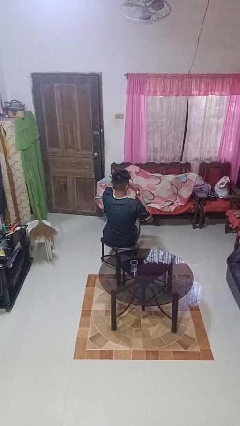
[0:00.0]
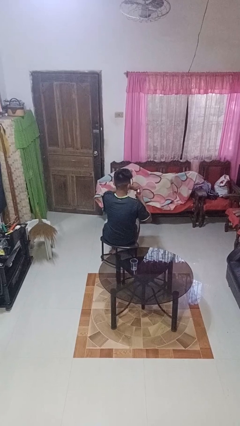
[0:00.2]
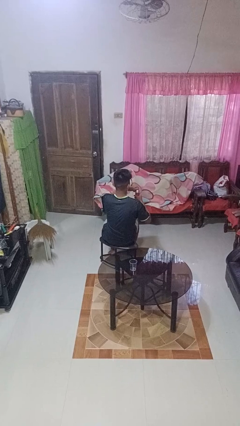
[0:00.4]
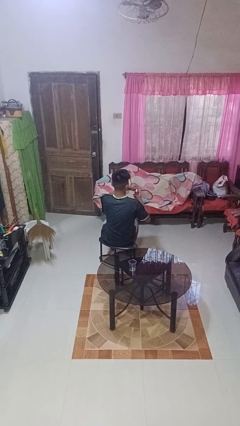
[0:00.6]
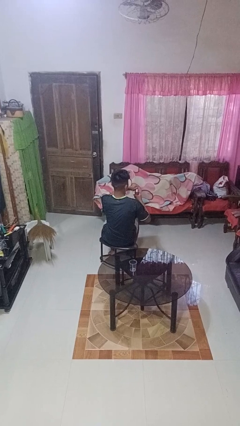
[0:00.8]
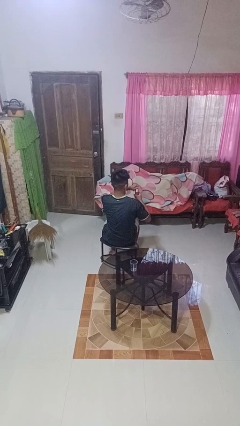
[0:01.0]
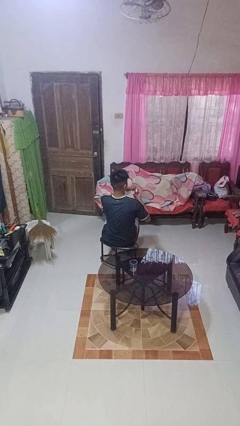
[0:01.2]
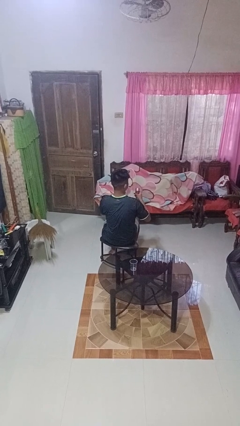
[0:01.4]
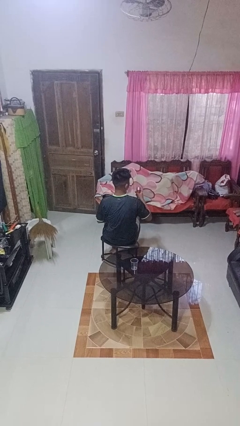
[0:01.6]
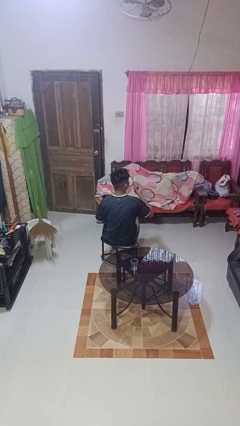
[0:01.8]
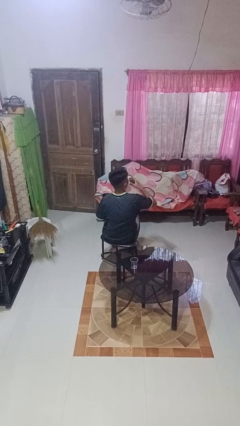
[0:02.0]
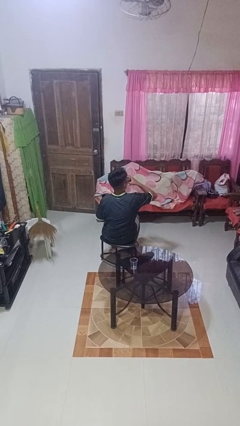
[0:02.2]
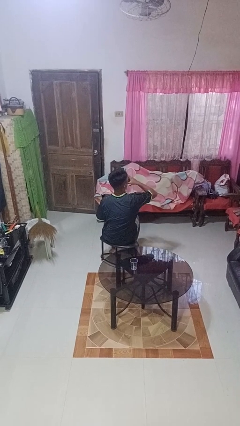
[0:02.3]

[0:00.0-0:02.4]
person opens beverage can

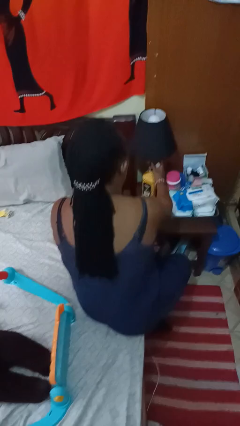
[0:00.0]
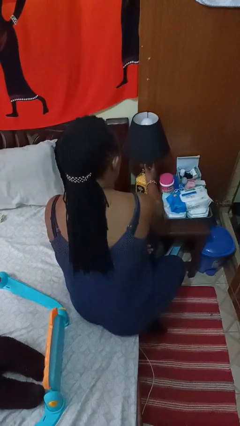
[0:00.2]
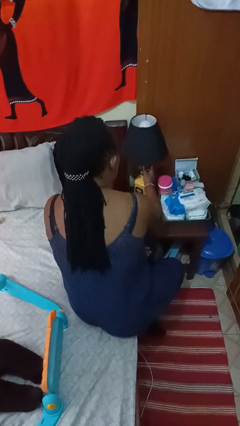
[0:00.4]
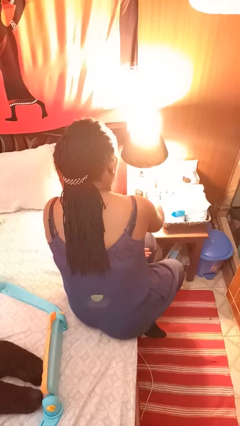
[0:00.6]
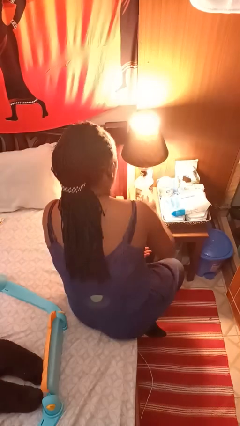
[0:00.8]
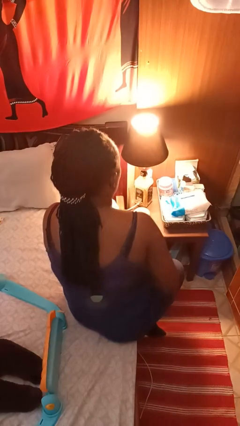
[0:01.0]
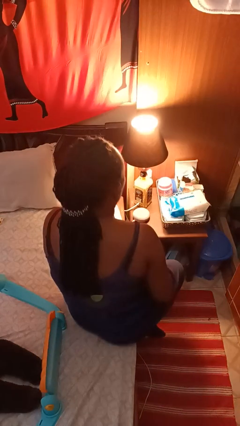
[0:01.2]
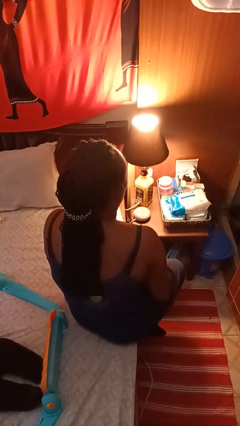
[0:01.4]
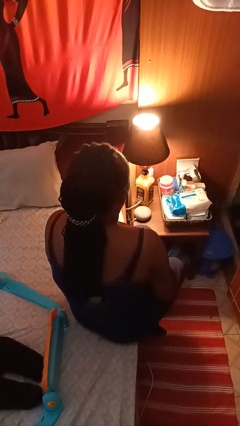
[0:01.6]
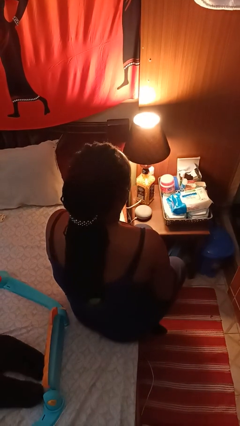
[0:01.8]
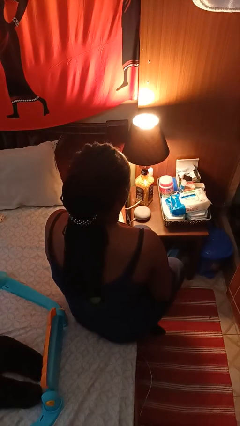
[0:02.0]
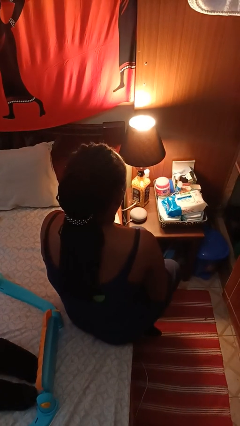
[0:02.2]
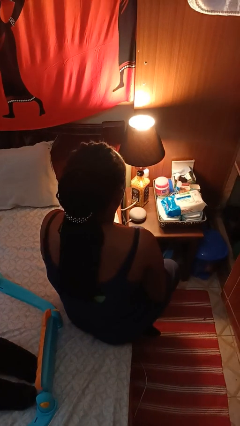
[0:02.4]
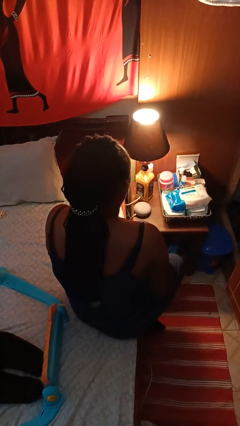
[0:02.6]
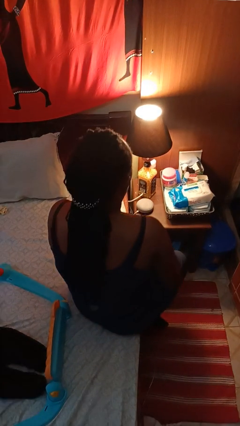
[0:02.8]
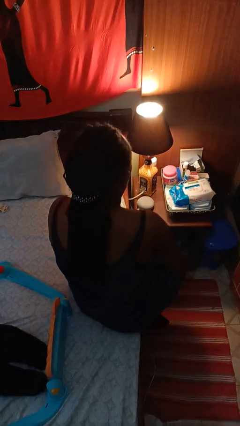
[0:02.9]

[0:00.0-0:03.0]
person turns on lamp

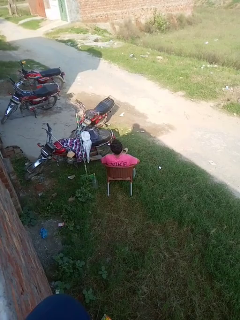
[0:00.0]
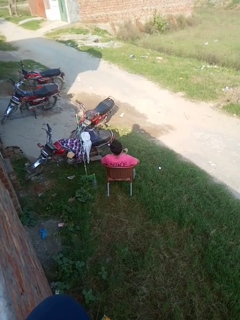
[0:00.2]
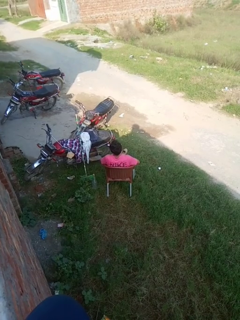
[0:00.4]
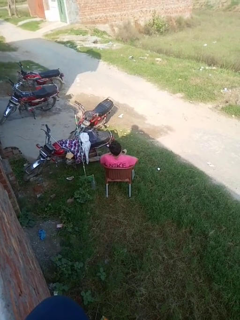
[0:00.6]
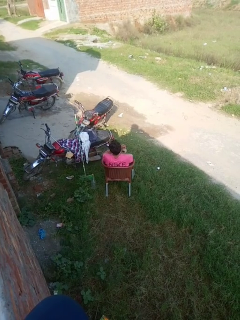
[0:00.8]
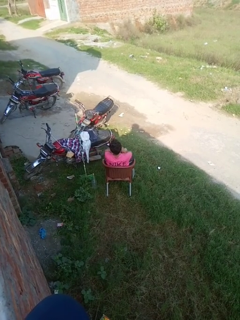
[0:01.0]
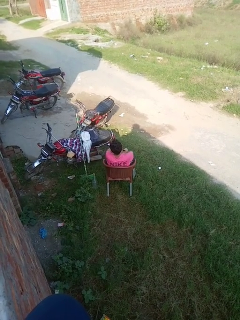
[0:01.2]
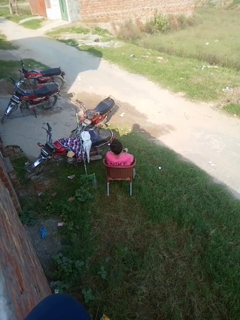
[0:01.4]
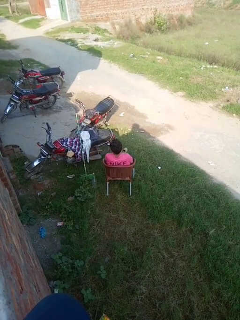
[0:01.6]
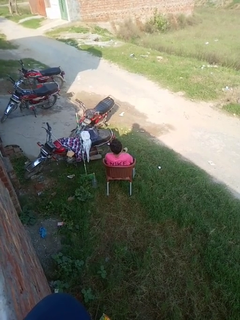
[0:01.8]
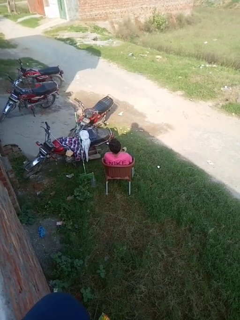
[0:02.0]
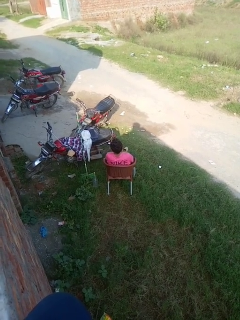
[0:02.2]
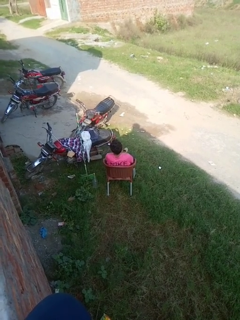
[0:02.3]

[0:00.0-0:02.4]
person crosses arms

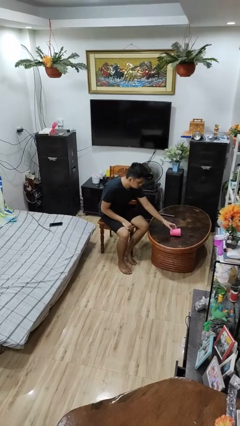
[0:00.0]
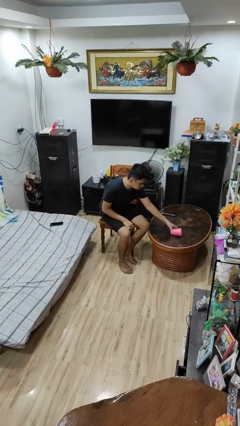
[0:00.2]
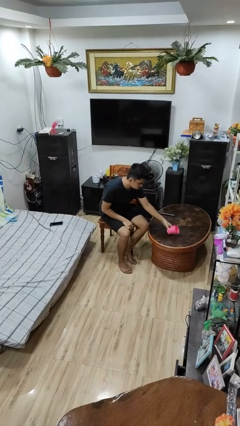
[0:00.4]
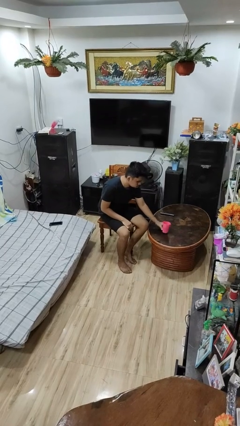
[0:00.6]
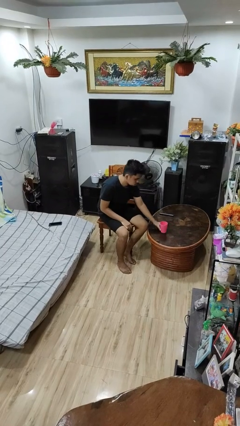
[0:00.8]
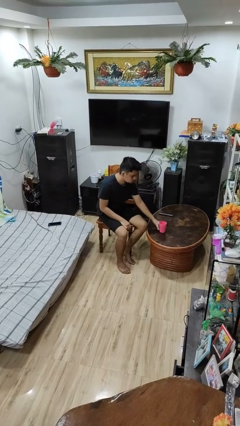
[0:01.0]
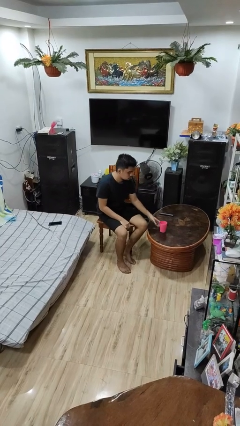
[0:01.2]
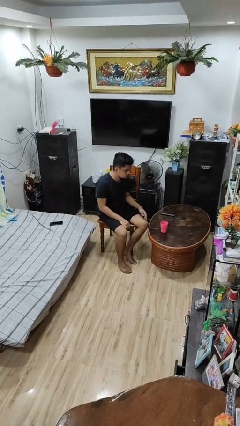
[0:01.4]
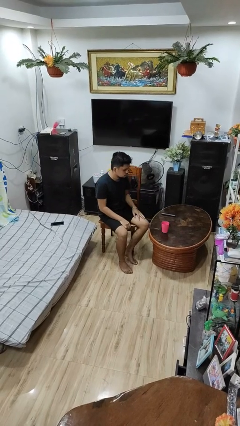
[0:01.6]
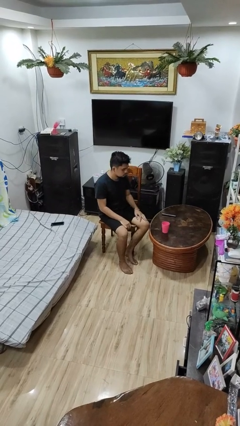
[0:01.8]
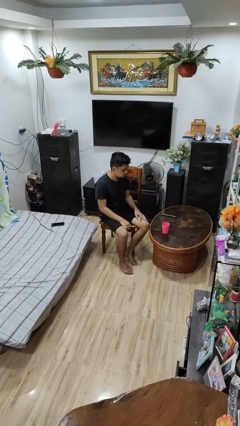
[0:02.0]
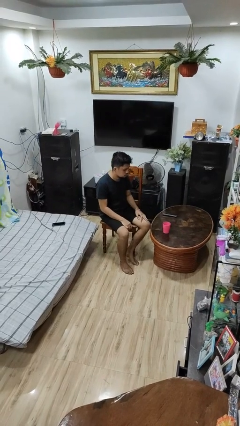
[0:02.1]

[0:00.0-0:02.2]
person sets upright glass

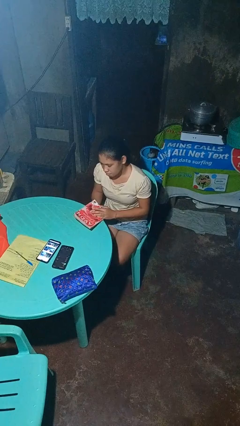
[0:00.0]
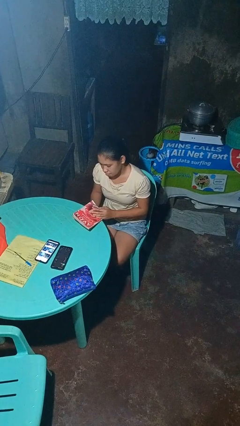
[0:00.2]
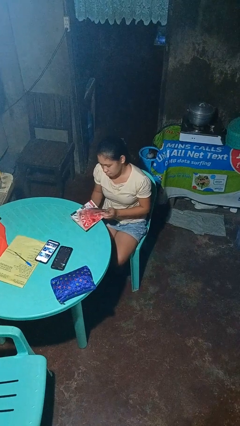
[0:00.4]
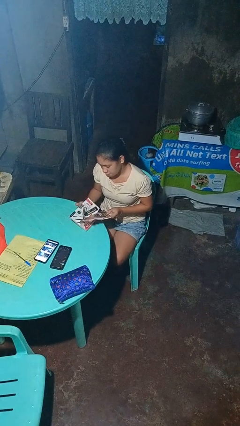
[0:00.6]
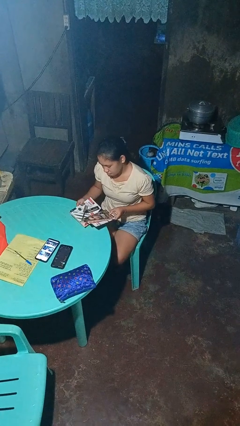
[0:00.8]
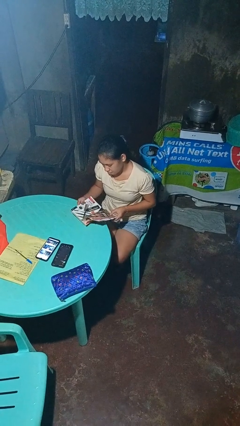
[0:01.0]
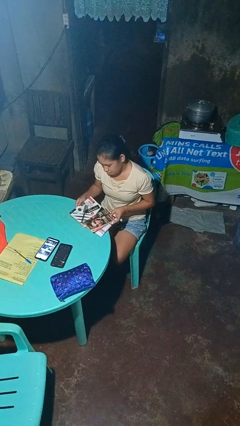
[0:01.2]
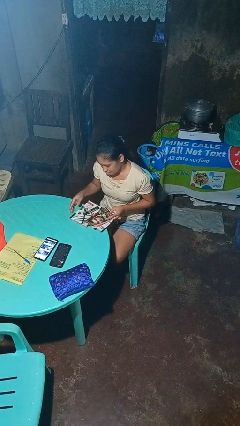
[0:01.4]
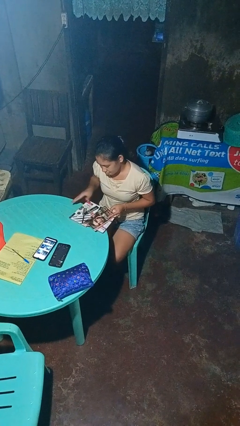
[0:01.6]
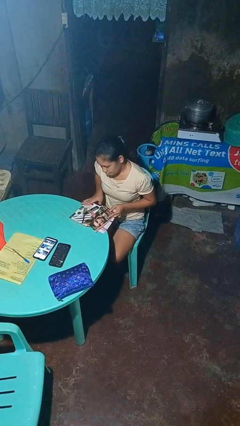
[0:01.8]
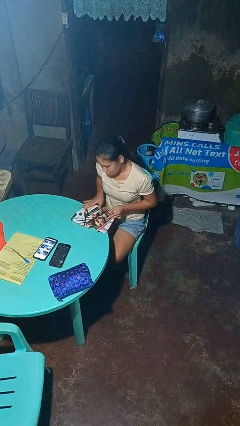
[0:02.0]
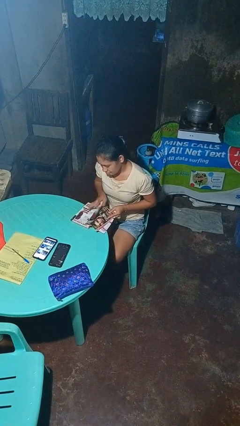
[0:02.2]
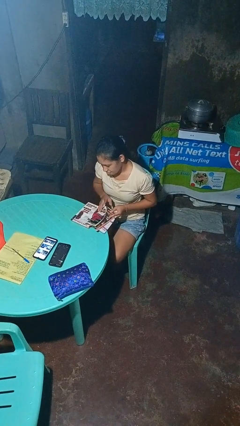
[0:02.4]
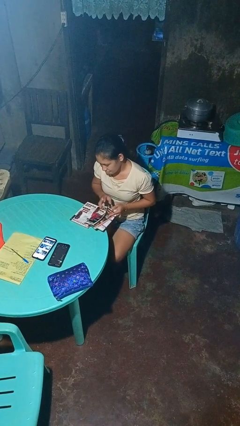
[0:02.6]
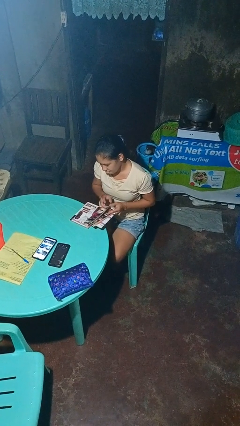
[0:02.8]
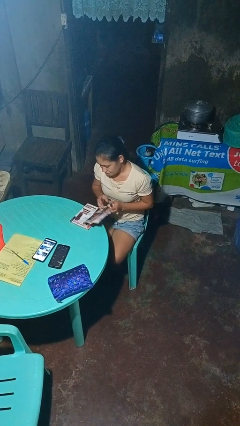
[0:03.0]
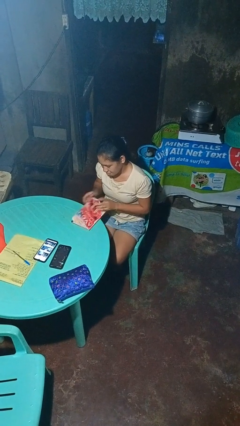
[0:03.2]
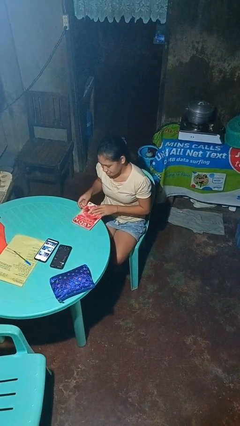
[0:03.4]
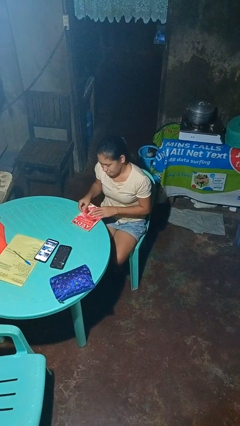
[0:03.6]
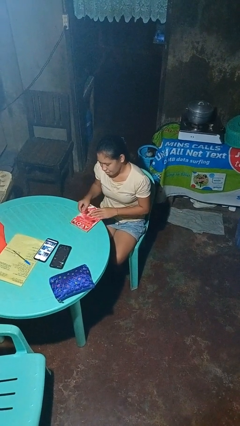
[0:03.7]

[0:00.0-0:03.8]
person reads magazine

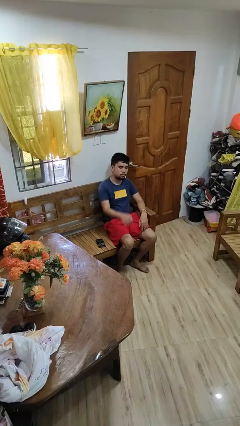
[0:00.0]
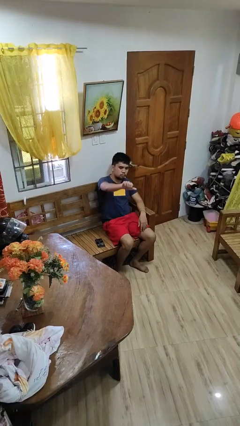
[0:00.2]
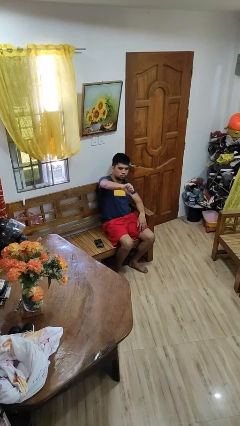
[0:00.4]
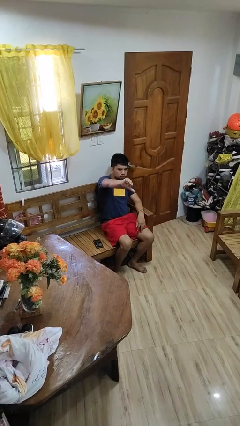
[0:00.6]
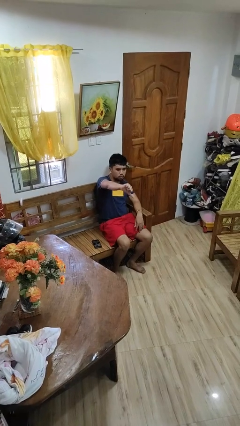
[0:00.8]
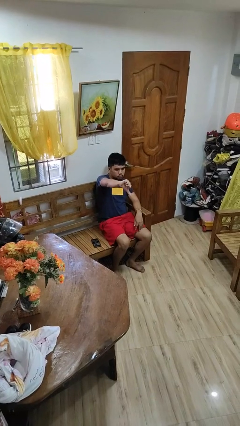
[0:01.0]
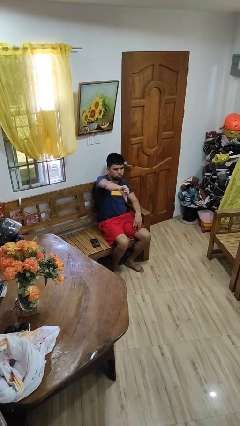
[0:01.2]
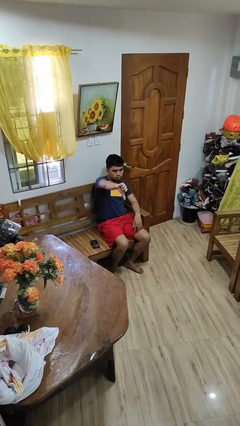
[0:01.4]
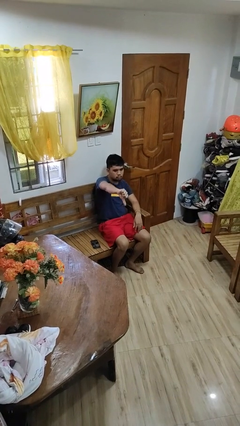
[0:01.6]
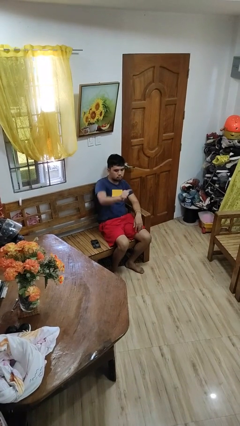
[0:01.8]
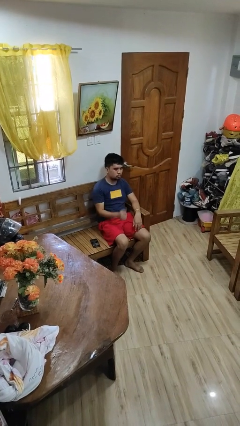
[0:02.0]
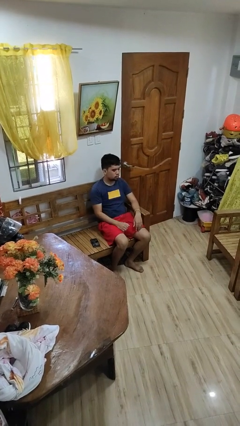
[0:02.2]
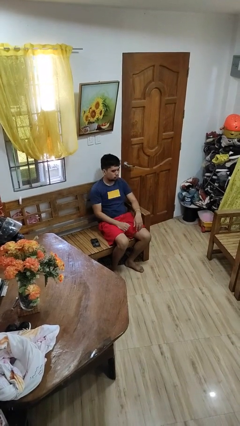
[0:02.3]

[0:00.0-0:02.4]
person gestures thumbs down

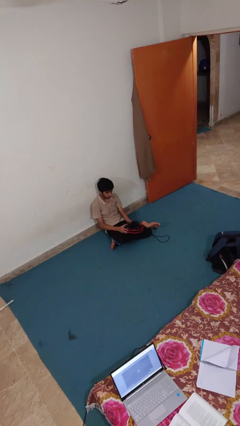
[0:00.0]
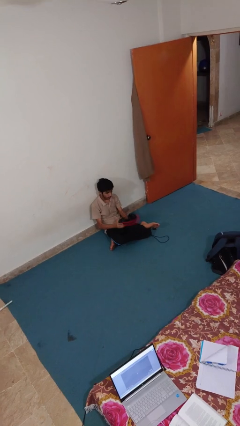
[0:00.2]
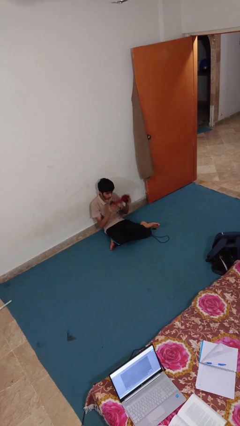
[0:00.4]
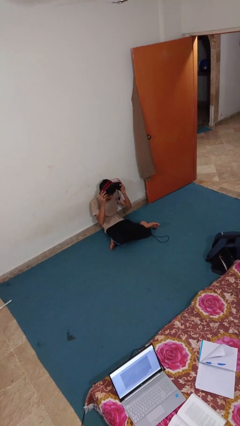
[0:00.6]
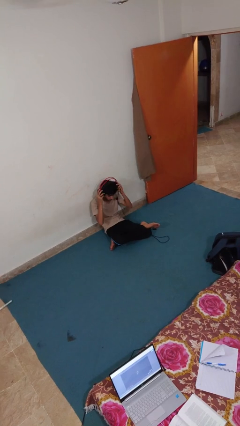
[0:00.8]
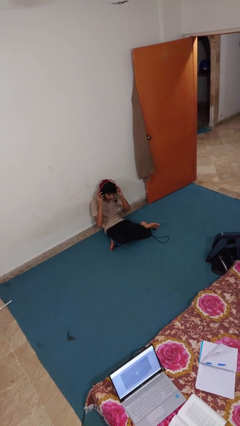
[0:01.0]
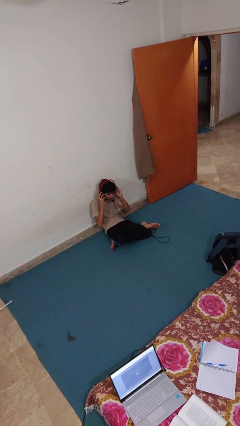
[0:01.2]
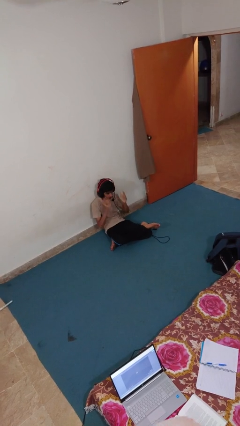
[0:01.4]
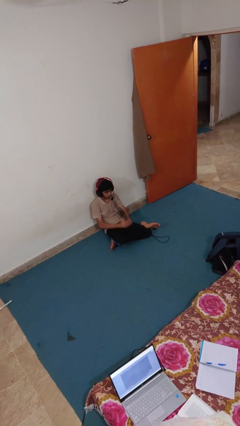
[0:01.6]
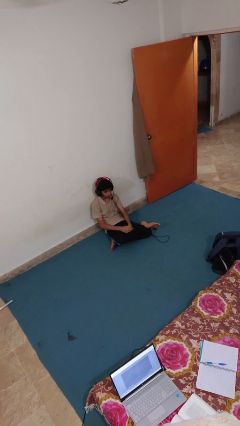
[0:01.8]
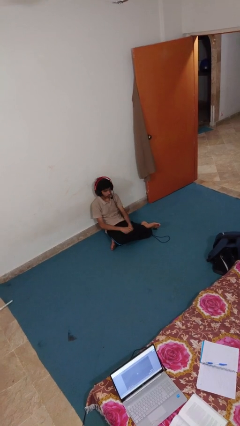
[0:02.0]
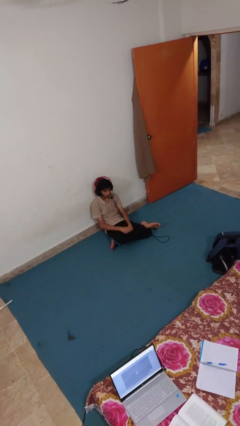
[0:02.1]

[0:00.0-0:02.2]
person puts on headphones
